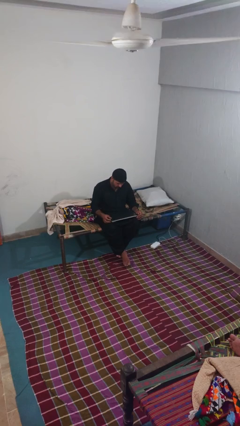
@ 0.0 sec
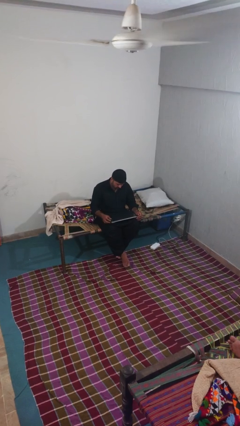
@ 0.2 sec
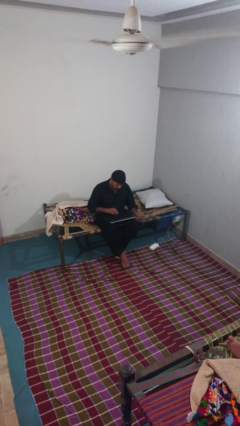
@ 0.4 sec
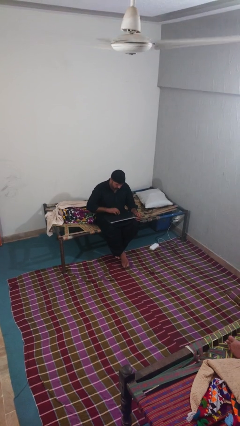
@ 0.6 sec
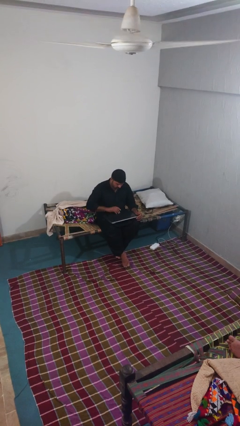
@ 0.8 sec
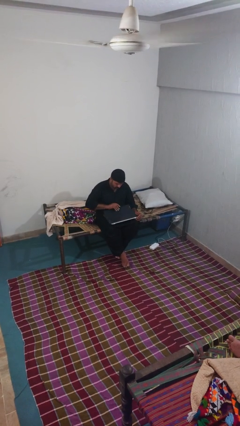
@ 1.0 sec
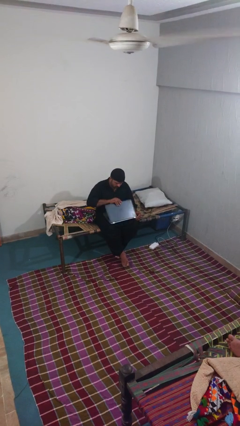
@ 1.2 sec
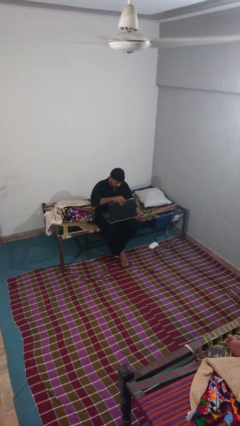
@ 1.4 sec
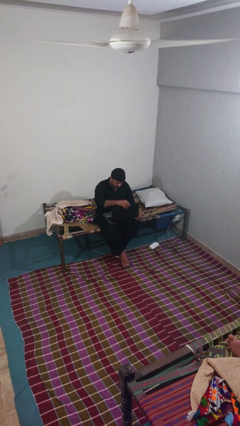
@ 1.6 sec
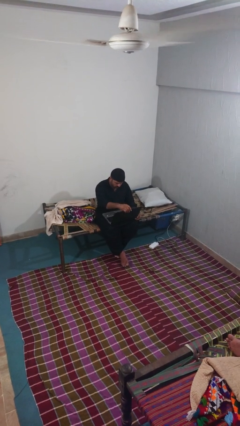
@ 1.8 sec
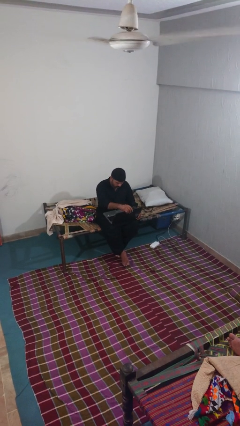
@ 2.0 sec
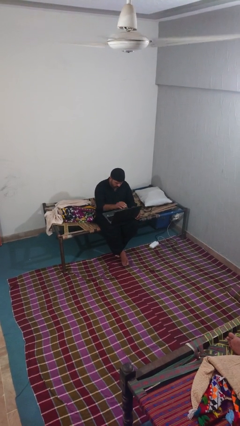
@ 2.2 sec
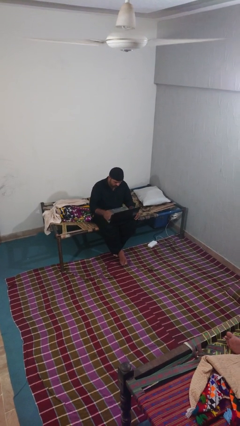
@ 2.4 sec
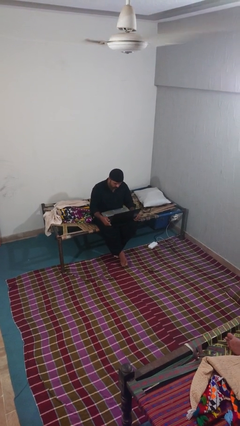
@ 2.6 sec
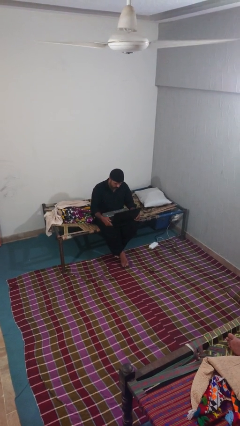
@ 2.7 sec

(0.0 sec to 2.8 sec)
person opens laptop

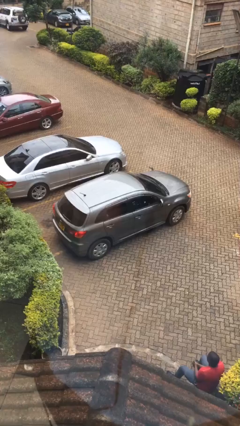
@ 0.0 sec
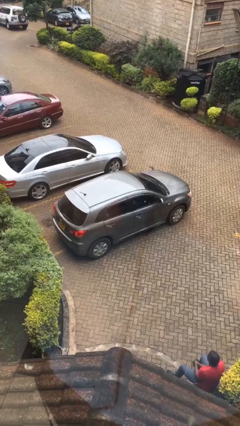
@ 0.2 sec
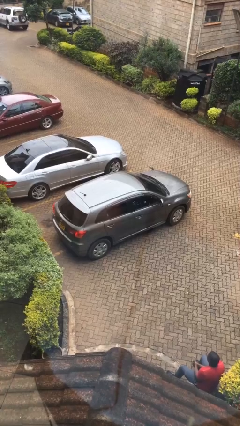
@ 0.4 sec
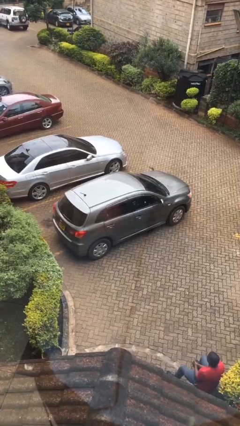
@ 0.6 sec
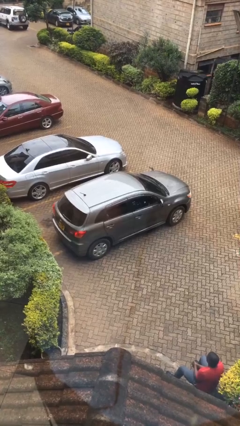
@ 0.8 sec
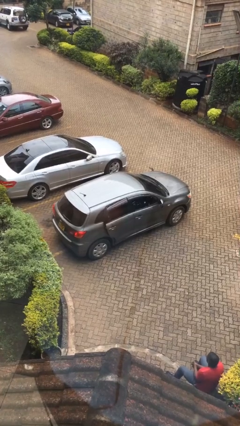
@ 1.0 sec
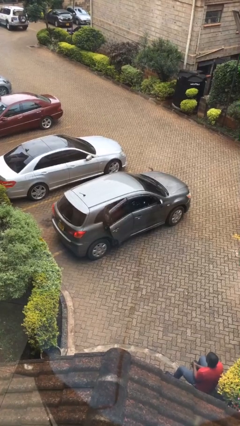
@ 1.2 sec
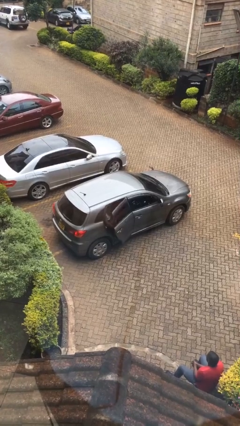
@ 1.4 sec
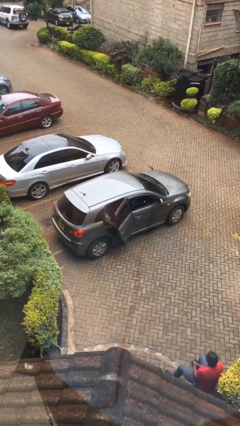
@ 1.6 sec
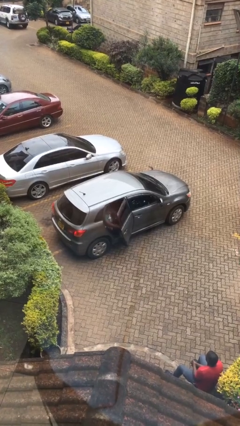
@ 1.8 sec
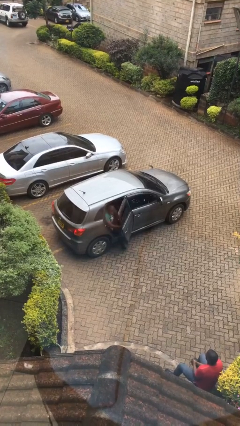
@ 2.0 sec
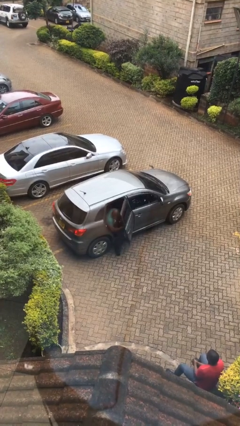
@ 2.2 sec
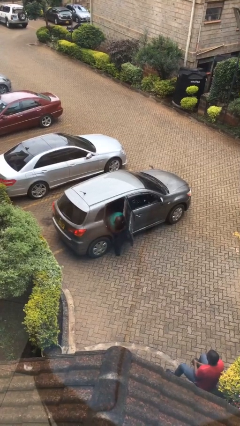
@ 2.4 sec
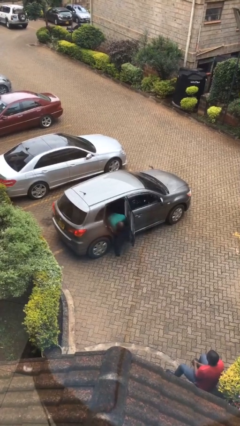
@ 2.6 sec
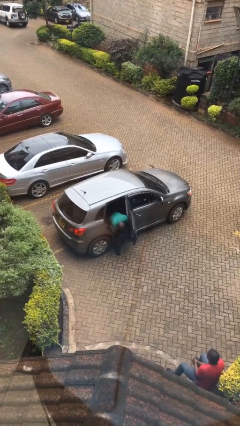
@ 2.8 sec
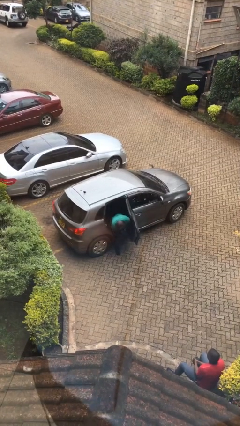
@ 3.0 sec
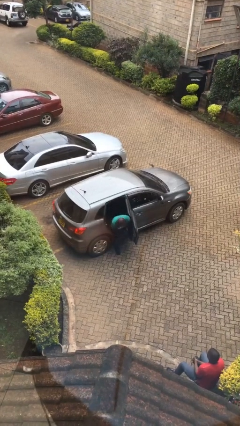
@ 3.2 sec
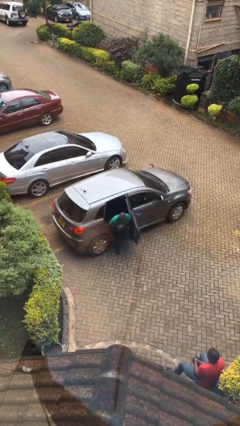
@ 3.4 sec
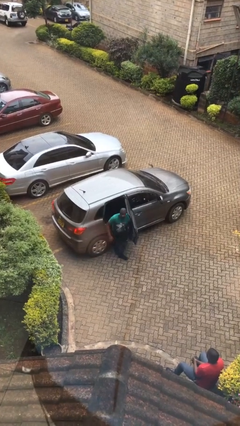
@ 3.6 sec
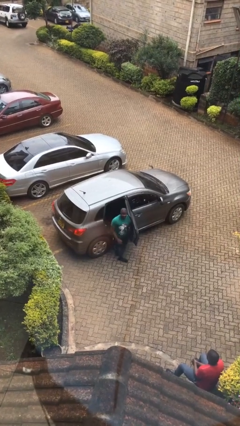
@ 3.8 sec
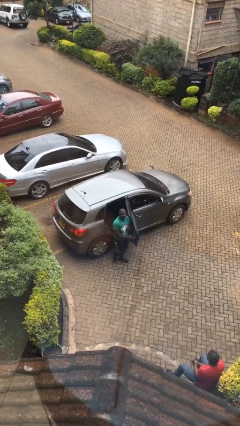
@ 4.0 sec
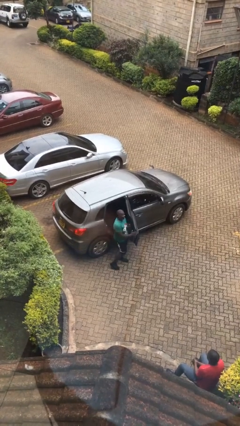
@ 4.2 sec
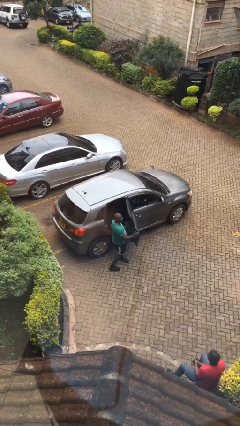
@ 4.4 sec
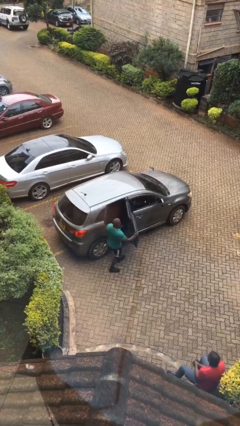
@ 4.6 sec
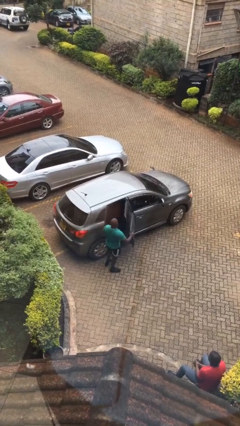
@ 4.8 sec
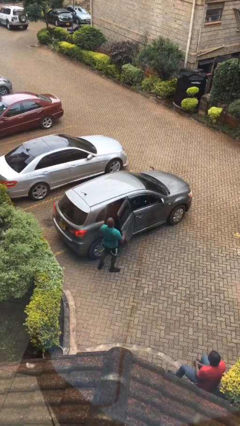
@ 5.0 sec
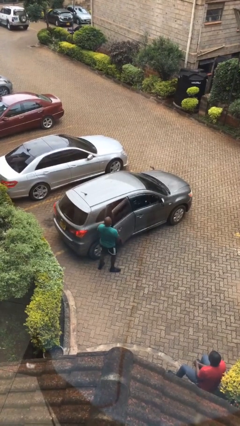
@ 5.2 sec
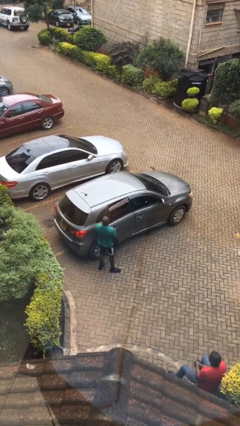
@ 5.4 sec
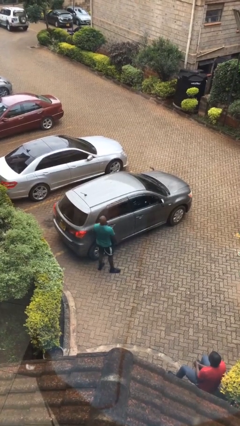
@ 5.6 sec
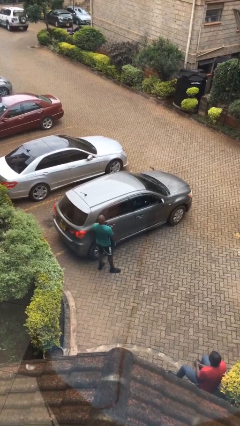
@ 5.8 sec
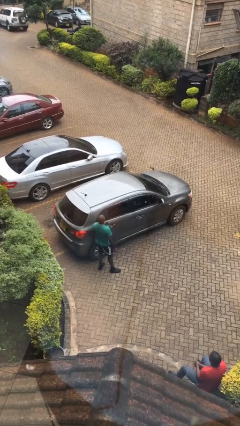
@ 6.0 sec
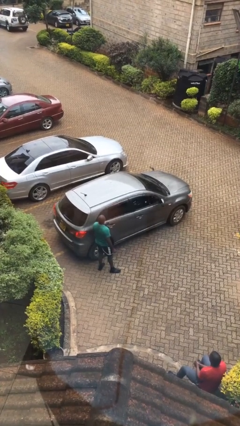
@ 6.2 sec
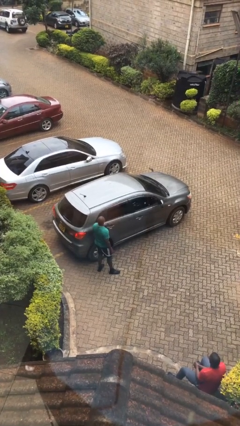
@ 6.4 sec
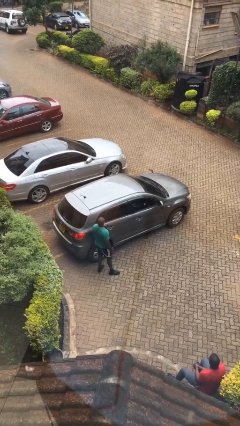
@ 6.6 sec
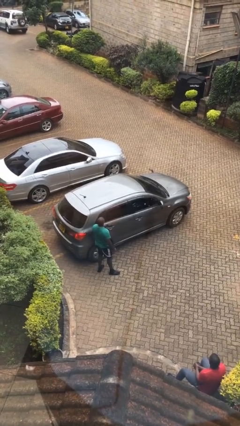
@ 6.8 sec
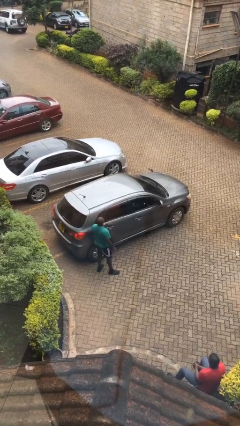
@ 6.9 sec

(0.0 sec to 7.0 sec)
car drops off person

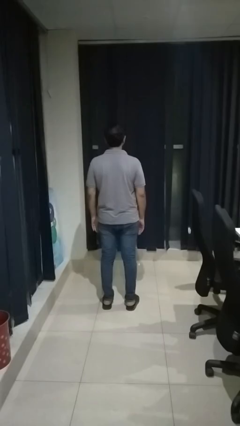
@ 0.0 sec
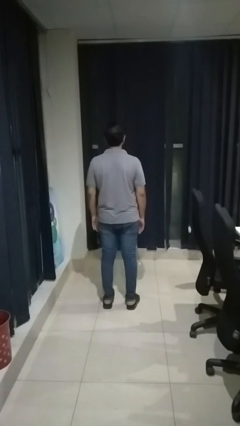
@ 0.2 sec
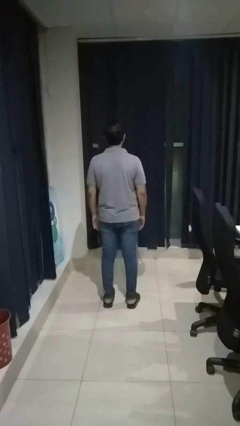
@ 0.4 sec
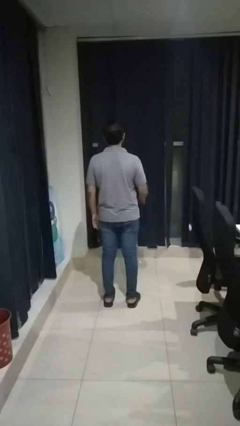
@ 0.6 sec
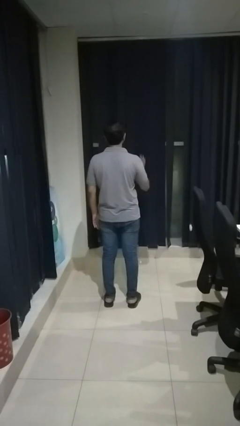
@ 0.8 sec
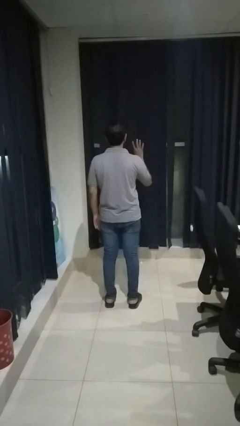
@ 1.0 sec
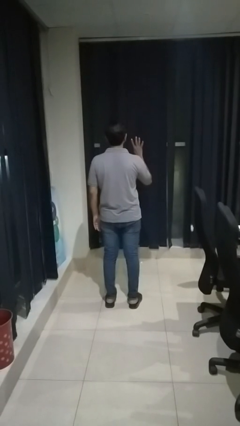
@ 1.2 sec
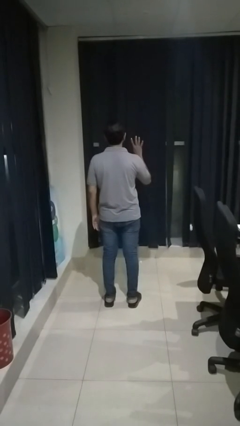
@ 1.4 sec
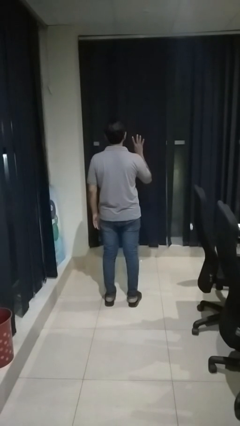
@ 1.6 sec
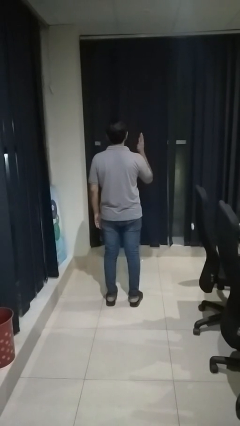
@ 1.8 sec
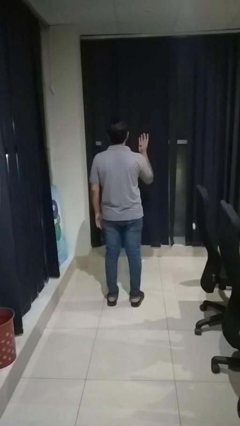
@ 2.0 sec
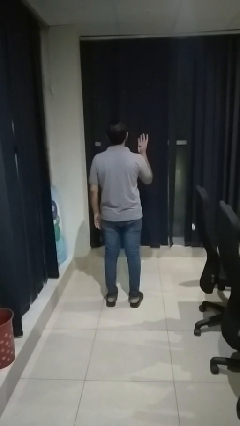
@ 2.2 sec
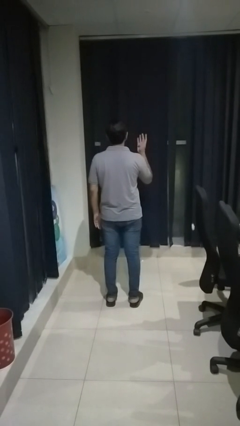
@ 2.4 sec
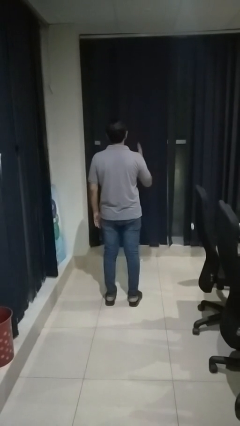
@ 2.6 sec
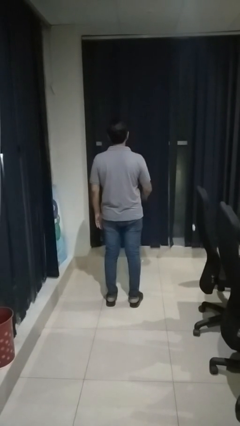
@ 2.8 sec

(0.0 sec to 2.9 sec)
person gestures number four

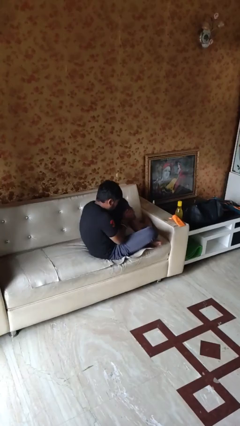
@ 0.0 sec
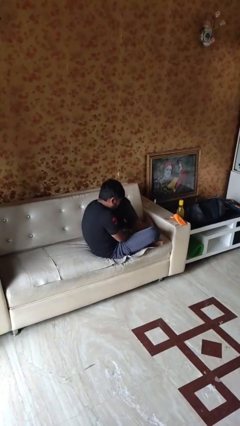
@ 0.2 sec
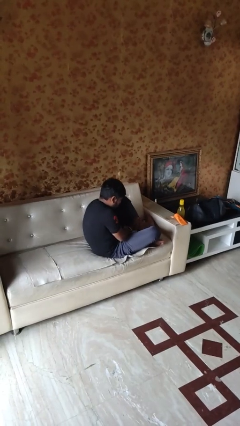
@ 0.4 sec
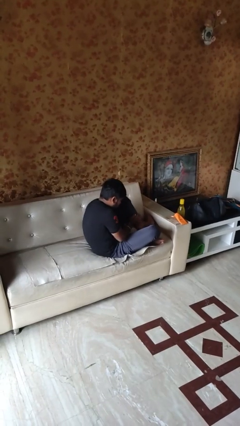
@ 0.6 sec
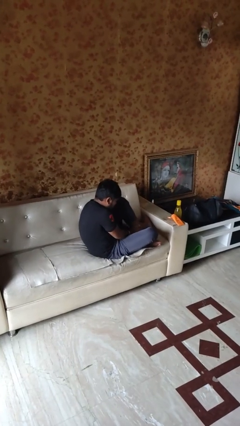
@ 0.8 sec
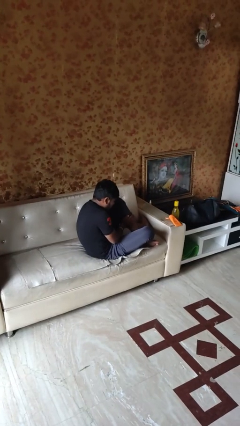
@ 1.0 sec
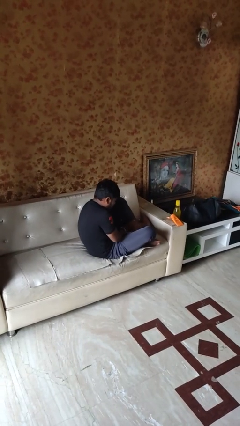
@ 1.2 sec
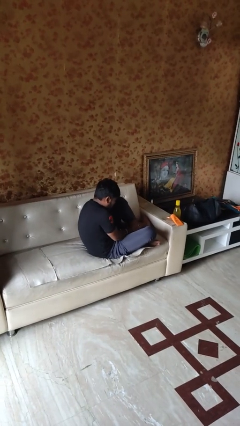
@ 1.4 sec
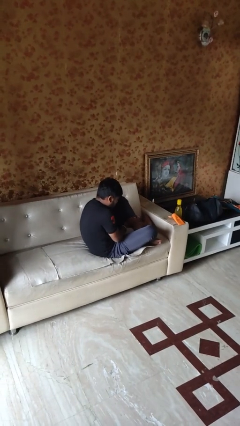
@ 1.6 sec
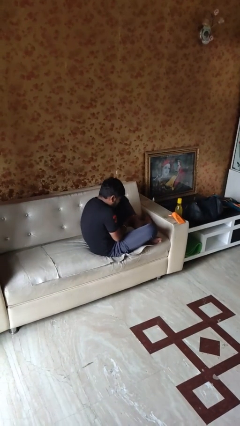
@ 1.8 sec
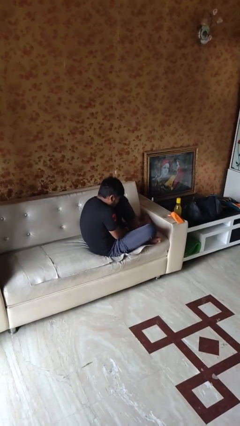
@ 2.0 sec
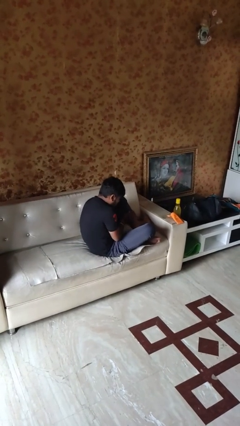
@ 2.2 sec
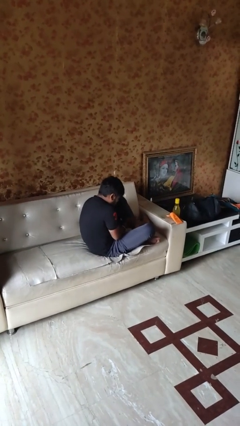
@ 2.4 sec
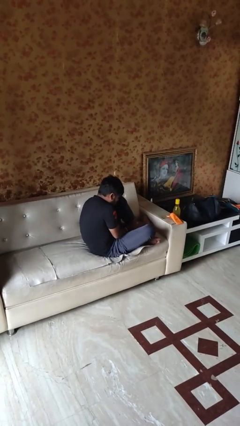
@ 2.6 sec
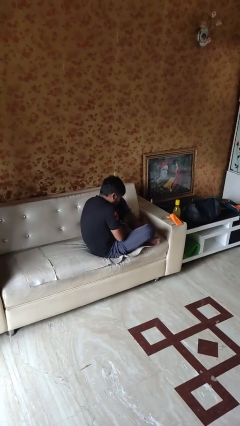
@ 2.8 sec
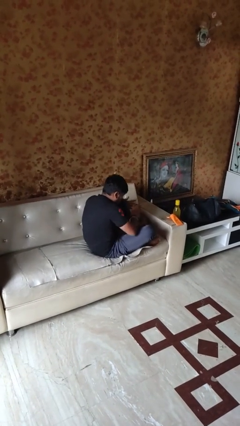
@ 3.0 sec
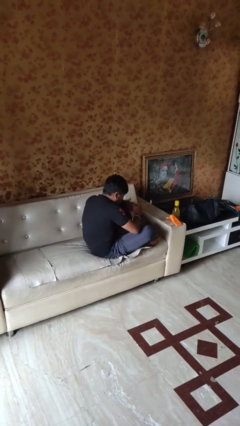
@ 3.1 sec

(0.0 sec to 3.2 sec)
person applies sunscreen

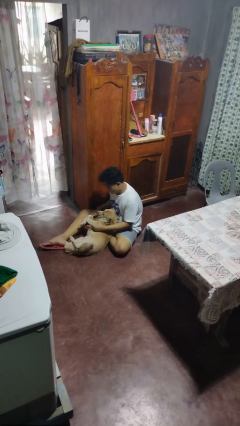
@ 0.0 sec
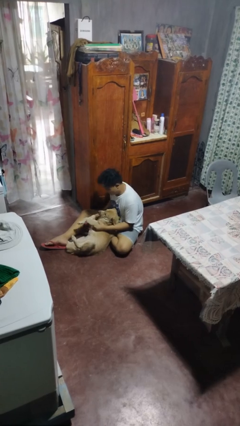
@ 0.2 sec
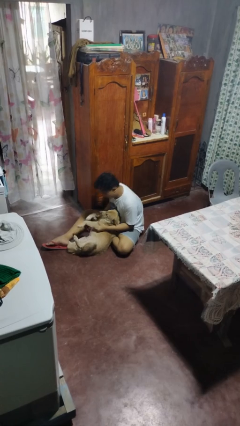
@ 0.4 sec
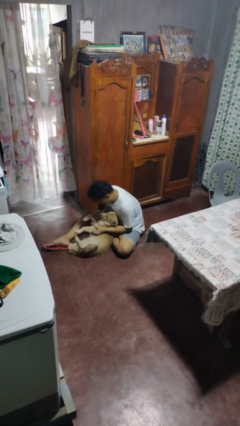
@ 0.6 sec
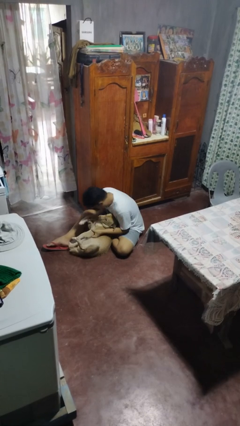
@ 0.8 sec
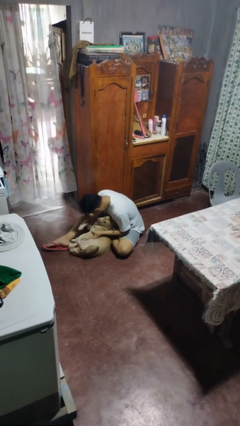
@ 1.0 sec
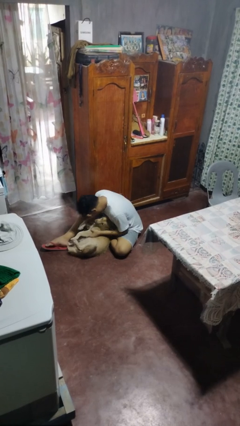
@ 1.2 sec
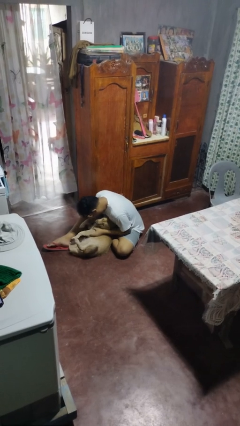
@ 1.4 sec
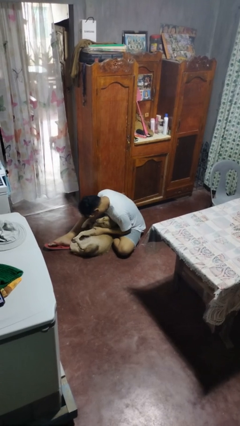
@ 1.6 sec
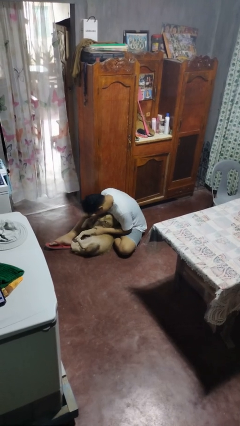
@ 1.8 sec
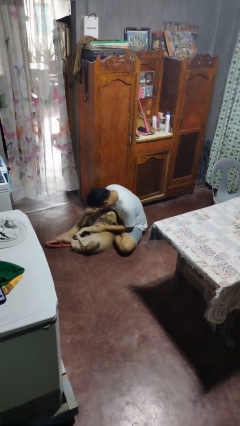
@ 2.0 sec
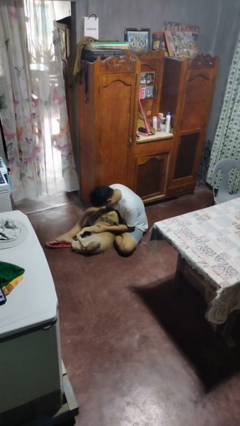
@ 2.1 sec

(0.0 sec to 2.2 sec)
person hugs dog
